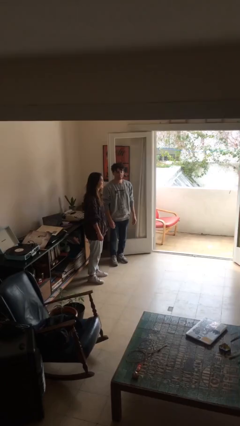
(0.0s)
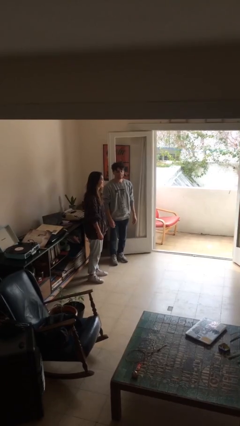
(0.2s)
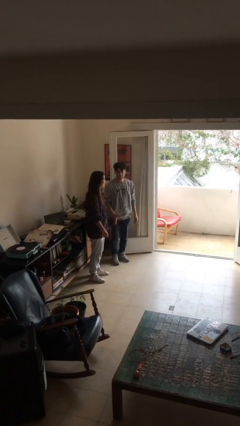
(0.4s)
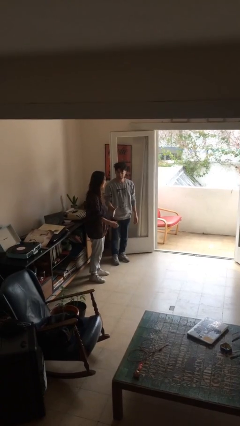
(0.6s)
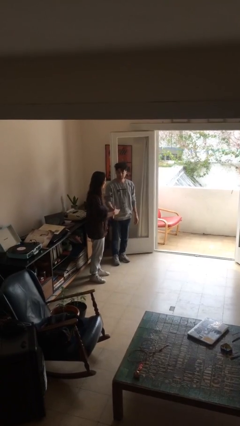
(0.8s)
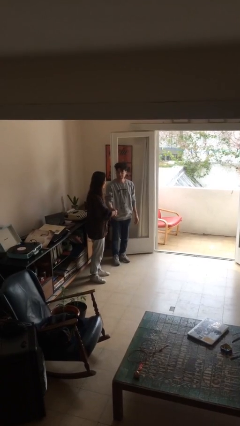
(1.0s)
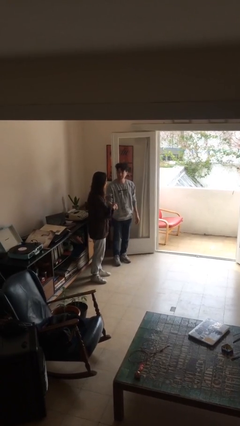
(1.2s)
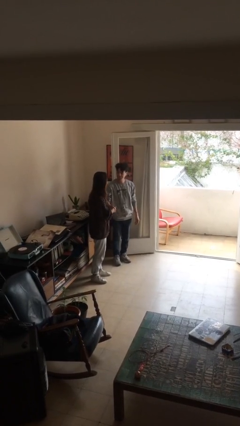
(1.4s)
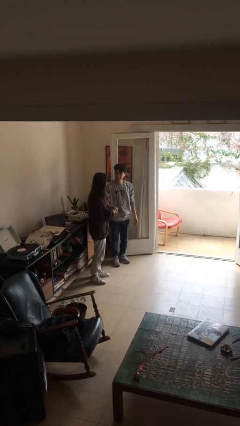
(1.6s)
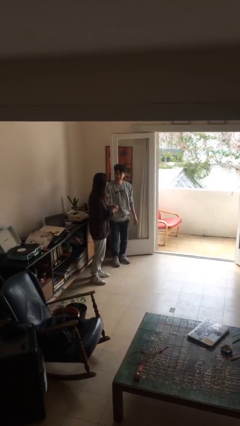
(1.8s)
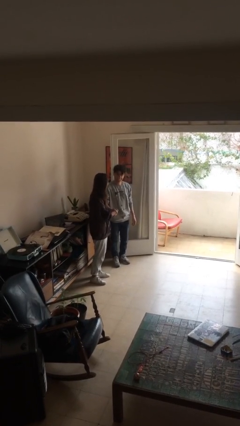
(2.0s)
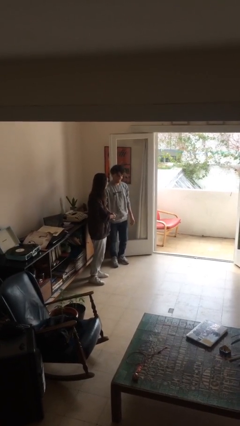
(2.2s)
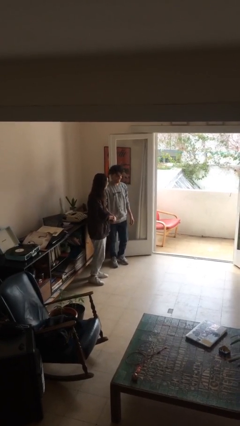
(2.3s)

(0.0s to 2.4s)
person shakes hand

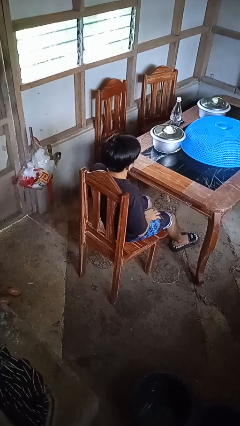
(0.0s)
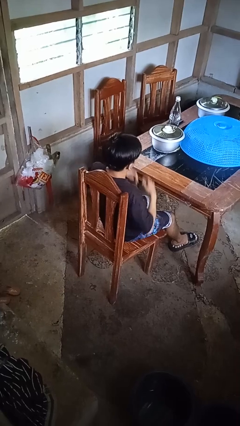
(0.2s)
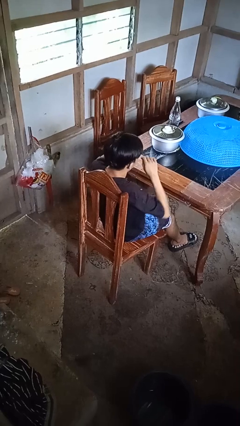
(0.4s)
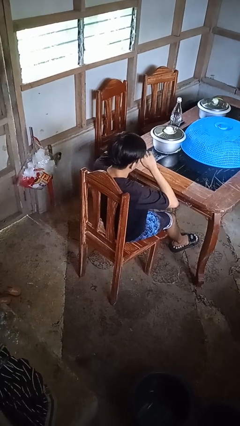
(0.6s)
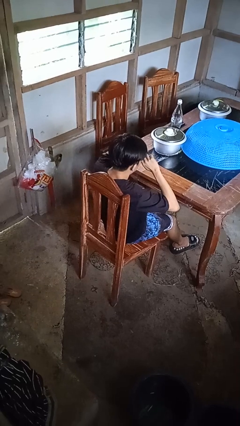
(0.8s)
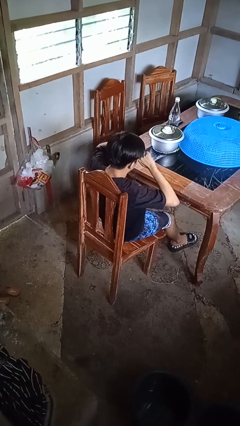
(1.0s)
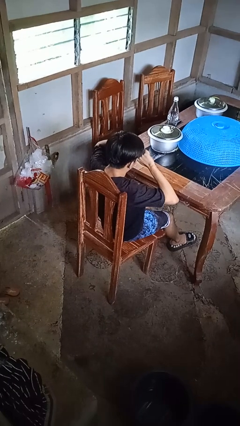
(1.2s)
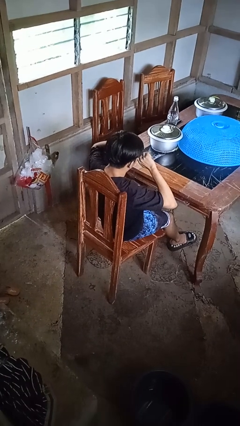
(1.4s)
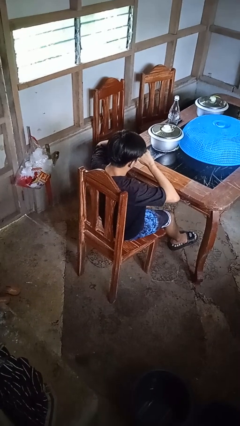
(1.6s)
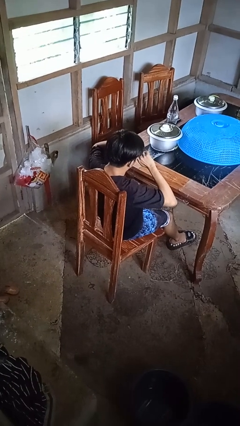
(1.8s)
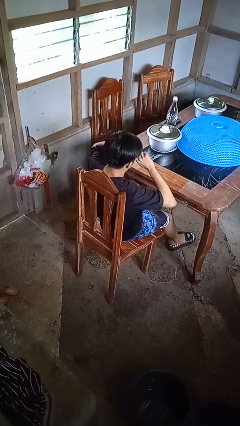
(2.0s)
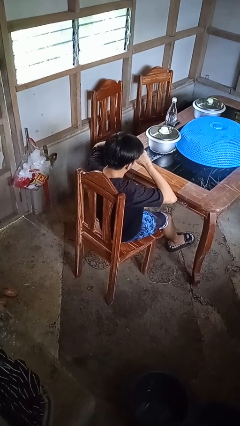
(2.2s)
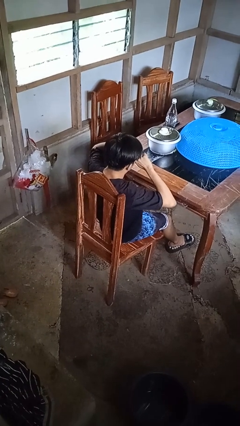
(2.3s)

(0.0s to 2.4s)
person rubs eyes

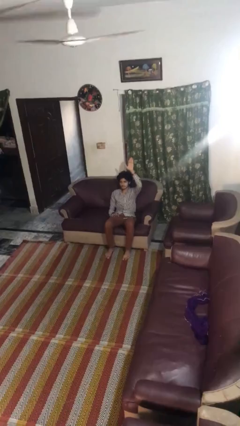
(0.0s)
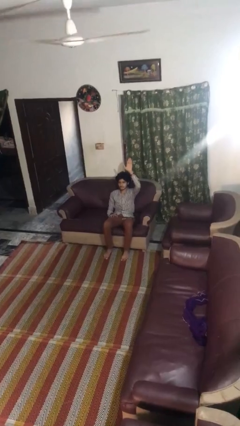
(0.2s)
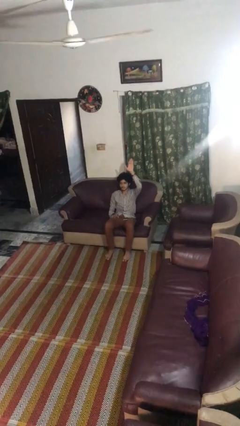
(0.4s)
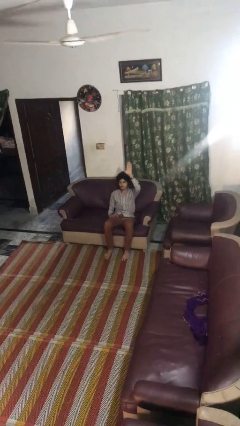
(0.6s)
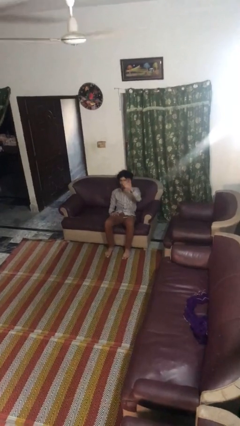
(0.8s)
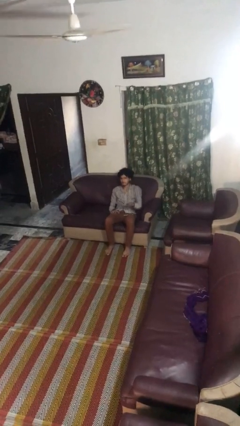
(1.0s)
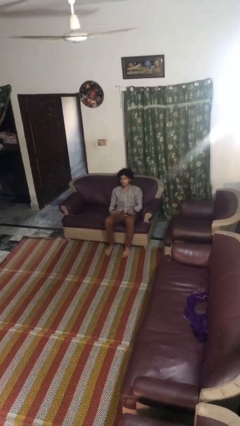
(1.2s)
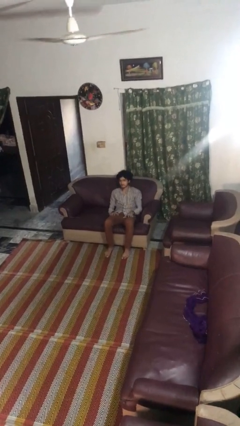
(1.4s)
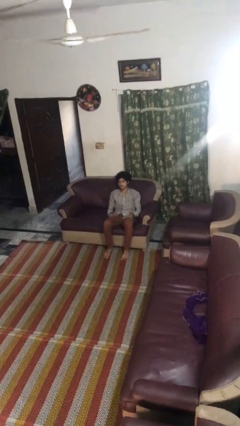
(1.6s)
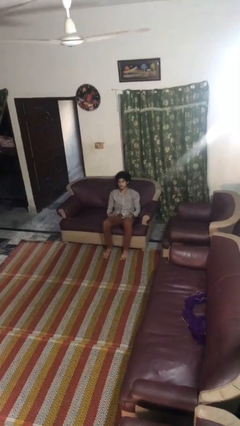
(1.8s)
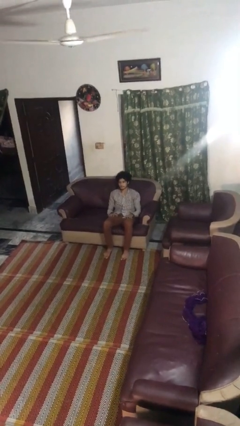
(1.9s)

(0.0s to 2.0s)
person gestures lower hand

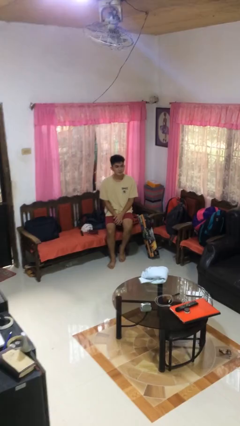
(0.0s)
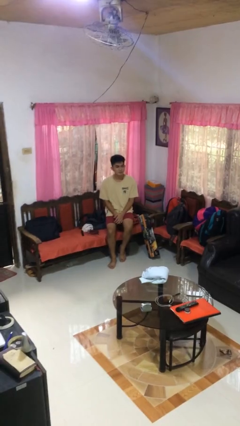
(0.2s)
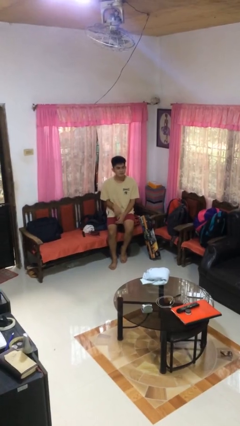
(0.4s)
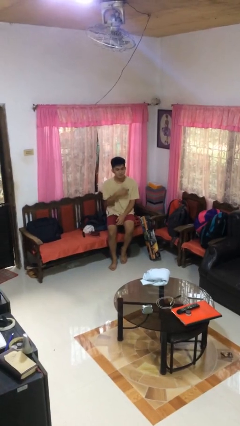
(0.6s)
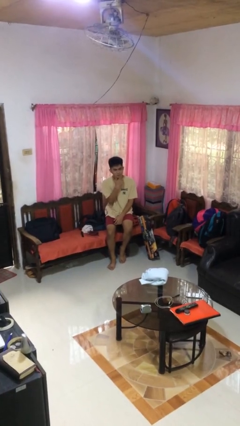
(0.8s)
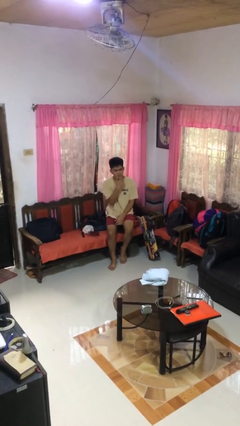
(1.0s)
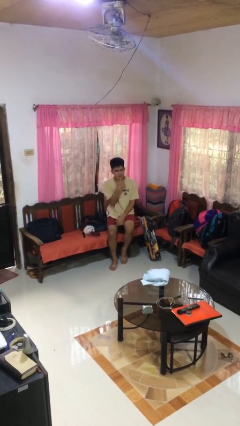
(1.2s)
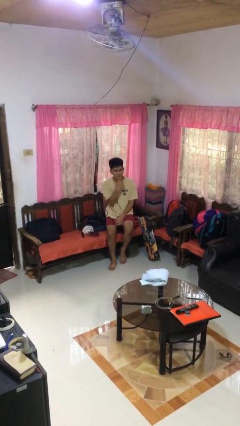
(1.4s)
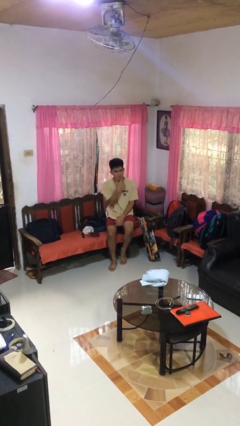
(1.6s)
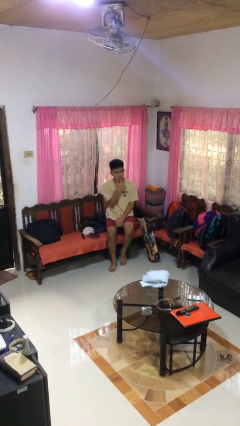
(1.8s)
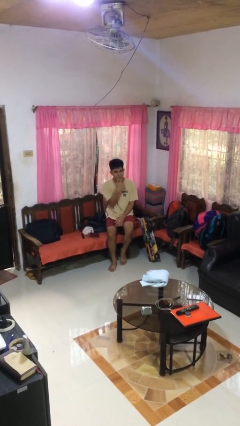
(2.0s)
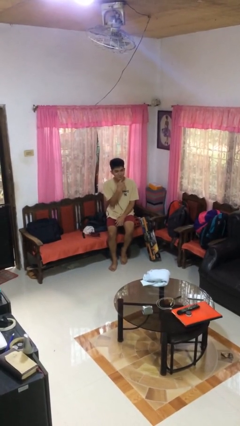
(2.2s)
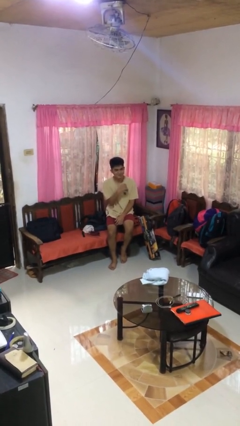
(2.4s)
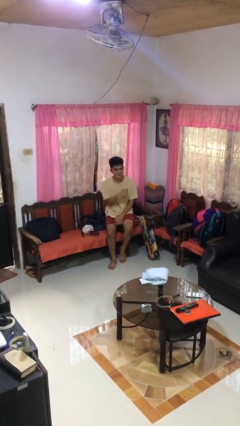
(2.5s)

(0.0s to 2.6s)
person strokes chin

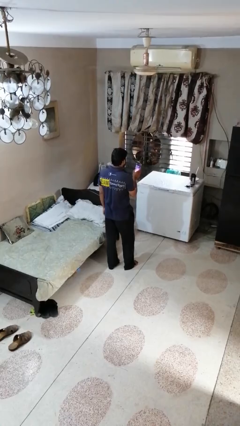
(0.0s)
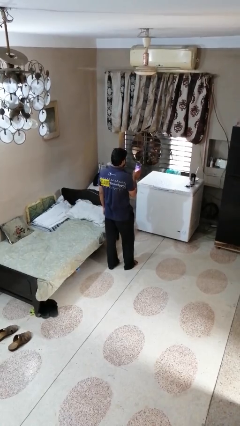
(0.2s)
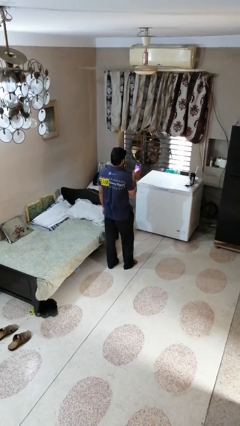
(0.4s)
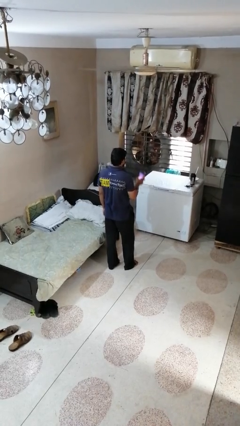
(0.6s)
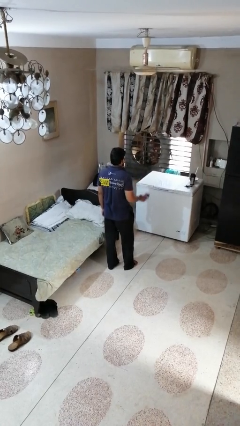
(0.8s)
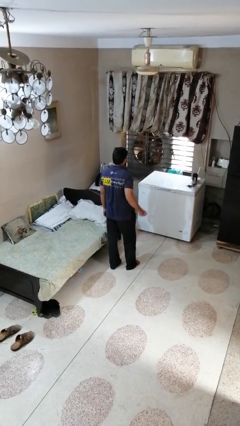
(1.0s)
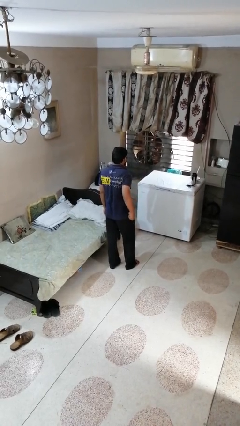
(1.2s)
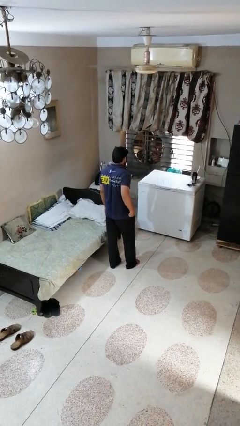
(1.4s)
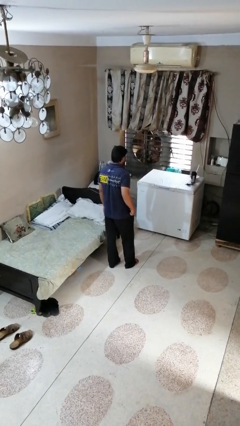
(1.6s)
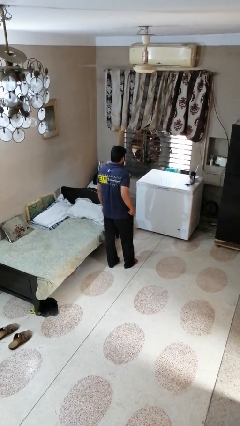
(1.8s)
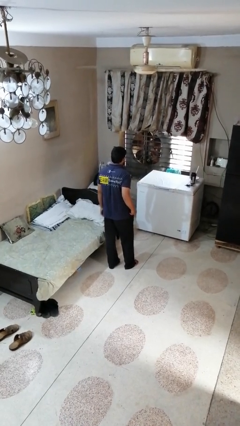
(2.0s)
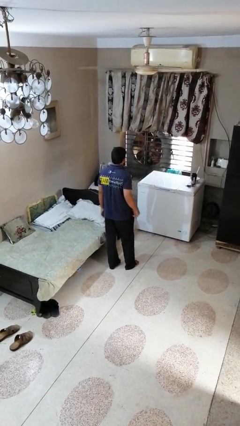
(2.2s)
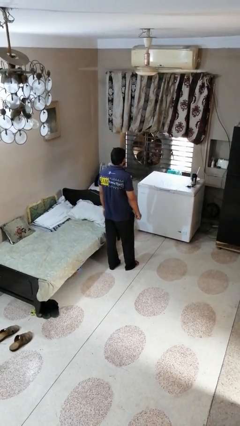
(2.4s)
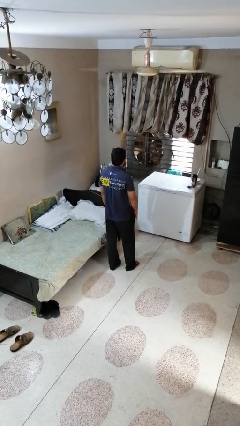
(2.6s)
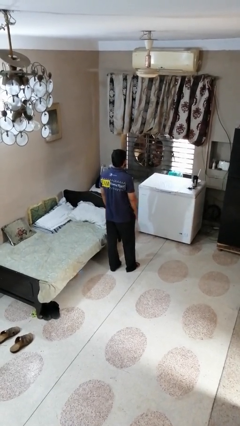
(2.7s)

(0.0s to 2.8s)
person puts phone into pocket

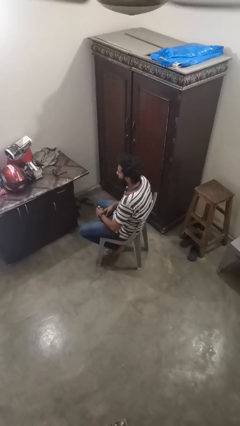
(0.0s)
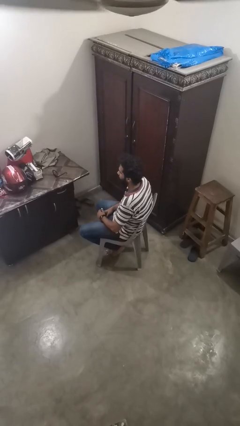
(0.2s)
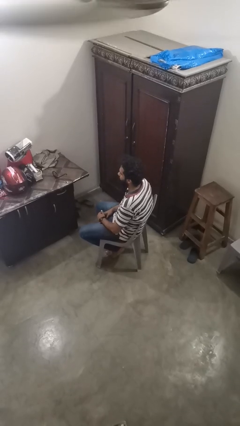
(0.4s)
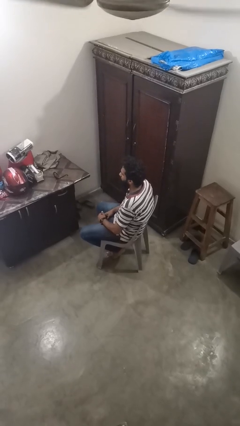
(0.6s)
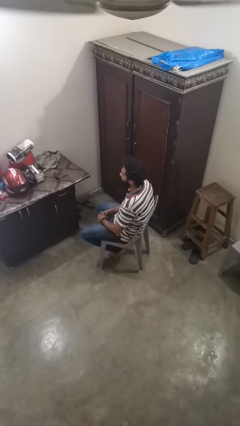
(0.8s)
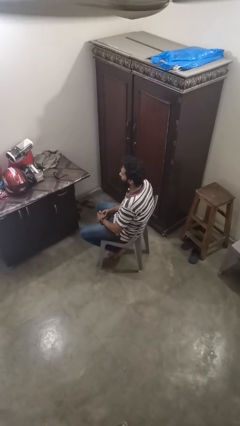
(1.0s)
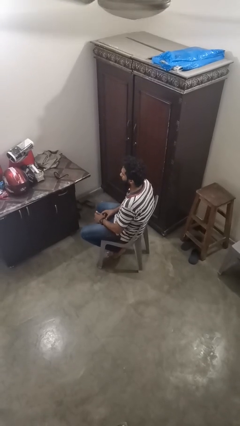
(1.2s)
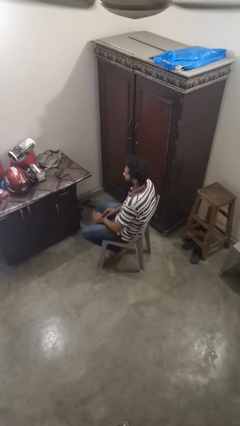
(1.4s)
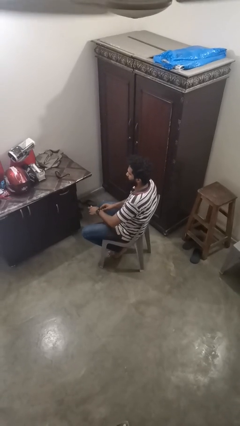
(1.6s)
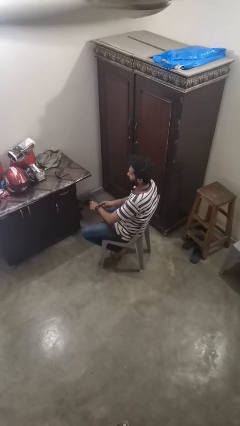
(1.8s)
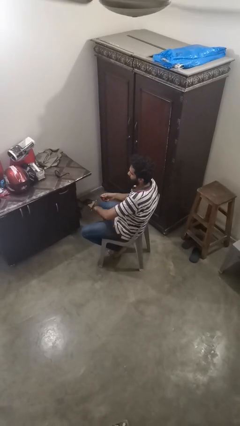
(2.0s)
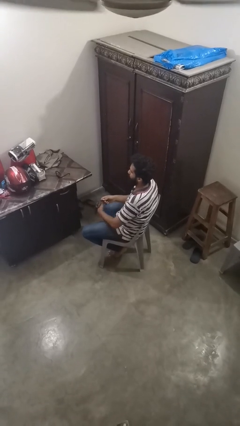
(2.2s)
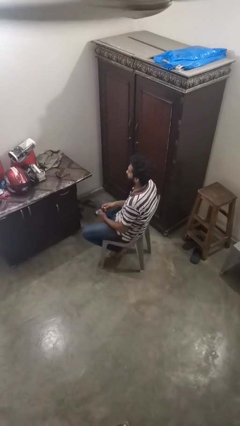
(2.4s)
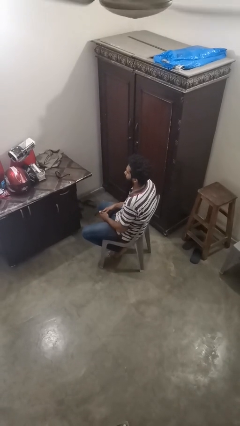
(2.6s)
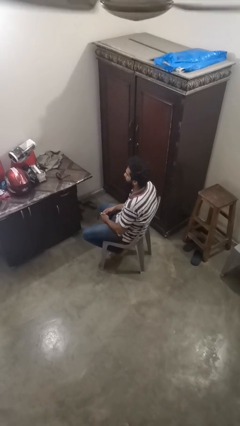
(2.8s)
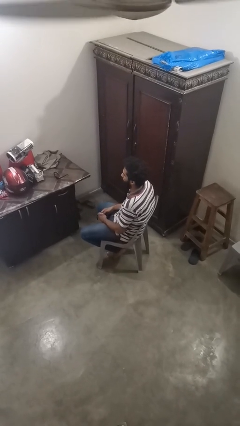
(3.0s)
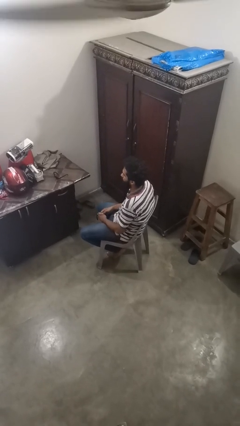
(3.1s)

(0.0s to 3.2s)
person takes off wristwatch

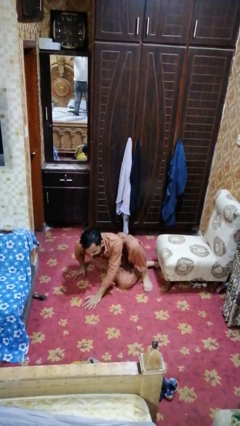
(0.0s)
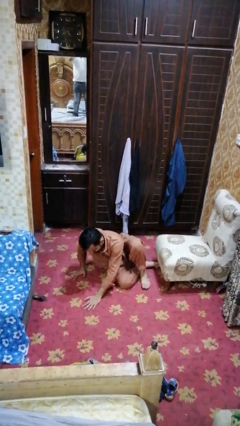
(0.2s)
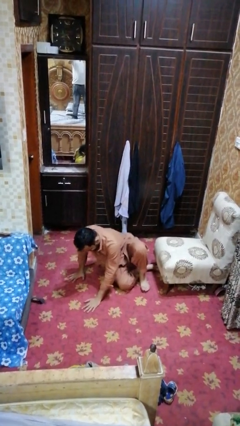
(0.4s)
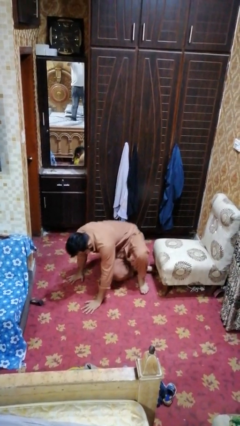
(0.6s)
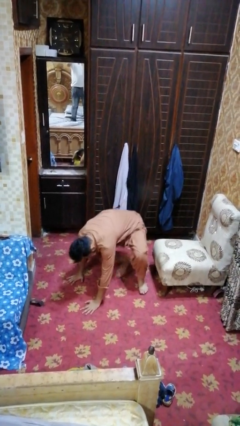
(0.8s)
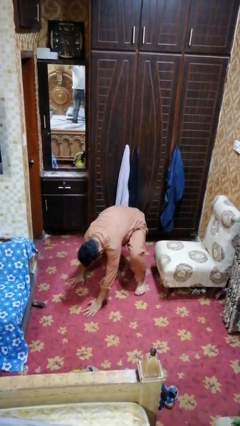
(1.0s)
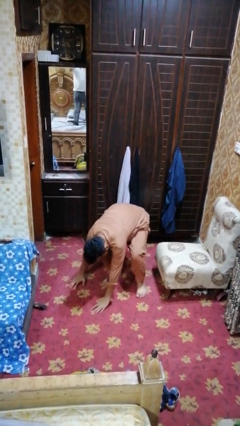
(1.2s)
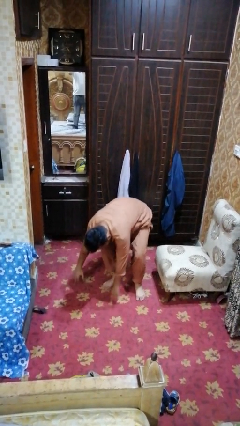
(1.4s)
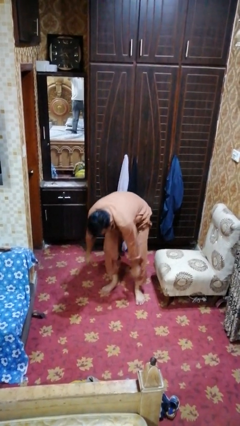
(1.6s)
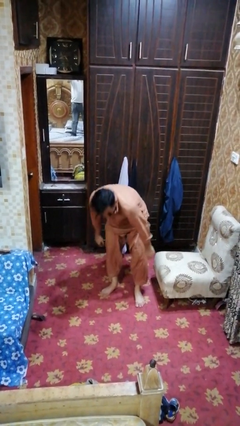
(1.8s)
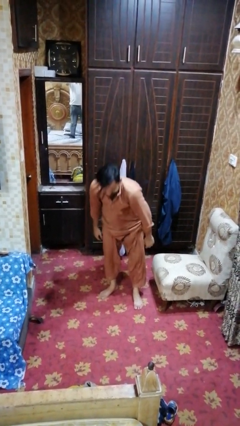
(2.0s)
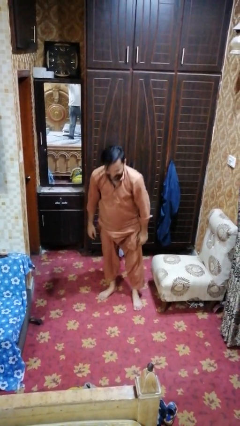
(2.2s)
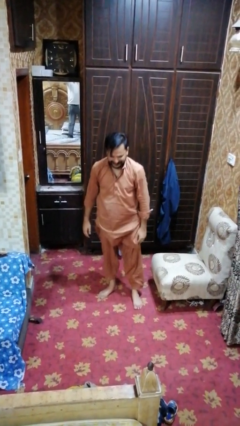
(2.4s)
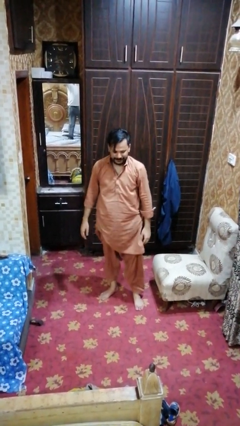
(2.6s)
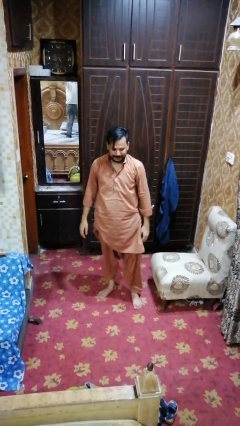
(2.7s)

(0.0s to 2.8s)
person stands up from floor
